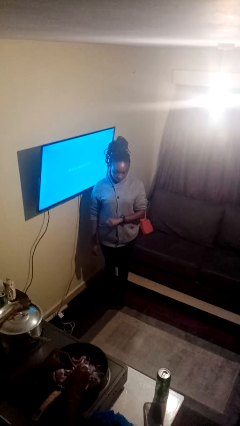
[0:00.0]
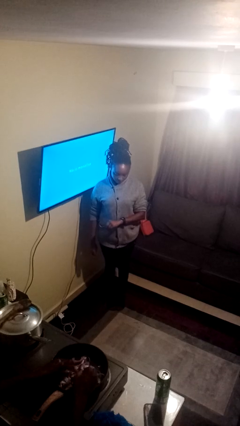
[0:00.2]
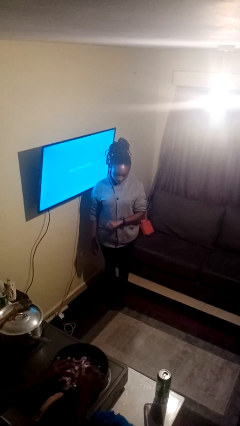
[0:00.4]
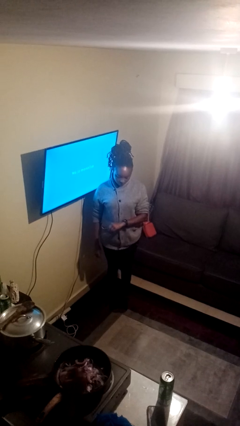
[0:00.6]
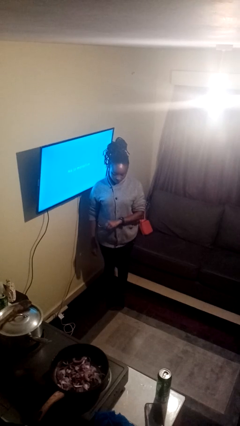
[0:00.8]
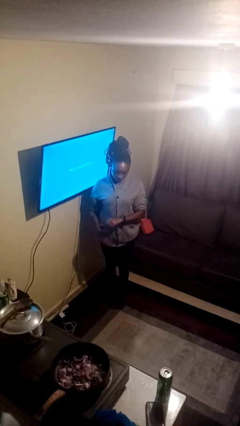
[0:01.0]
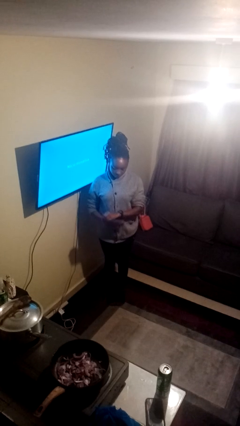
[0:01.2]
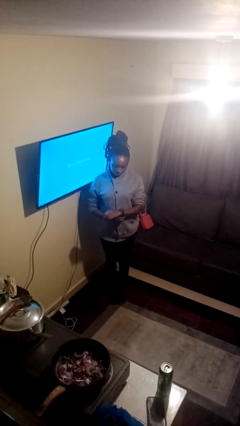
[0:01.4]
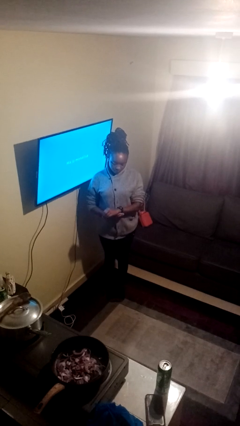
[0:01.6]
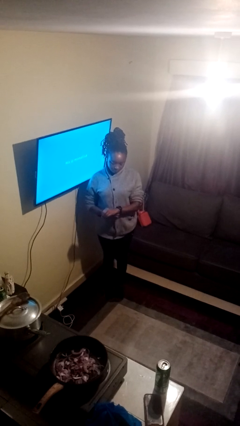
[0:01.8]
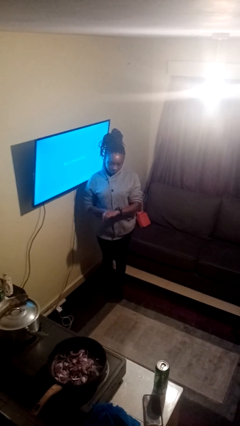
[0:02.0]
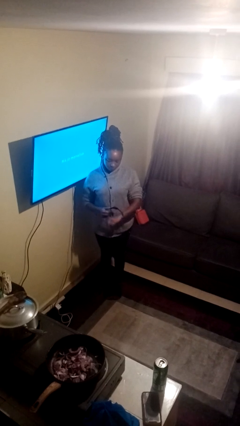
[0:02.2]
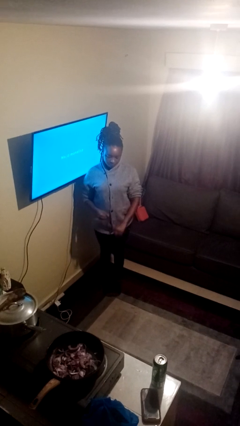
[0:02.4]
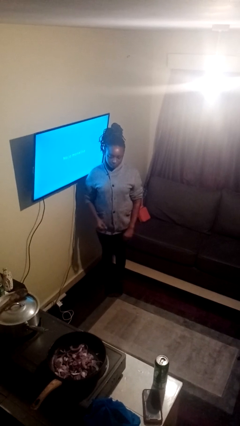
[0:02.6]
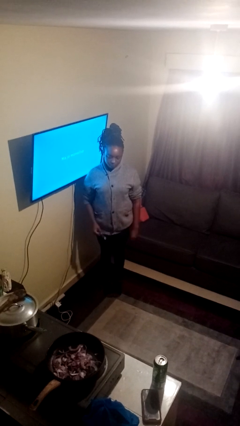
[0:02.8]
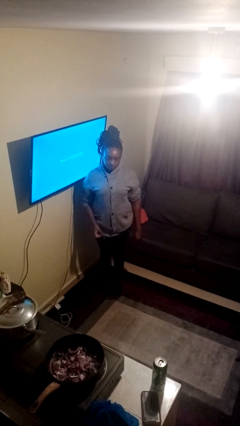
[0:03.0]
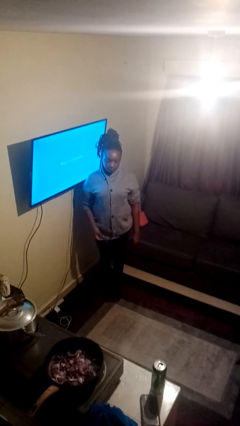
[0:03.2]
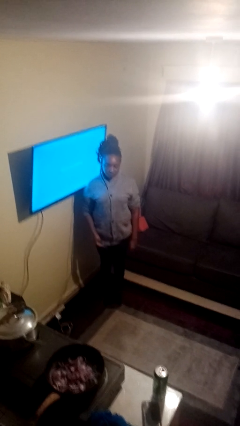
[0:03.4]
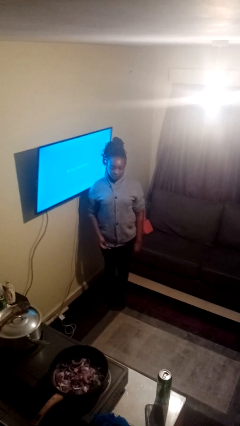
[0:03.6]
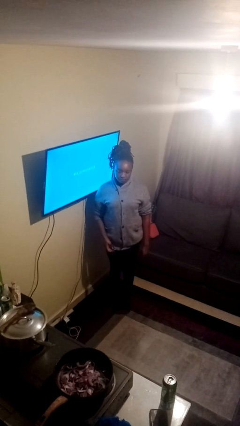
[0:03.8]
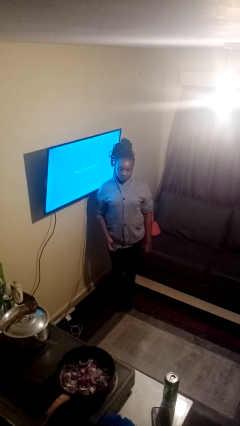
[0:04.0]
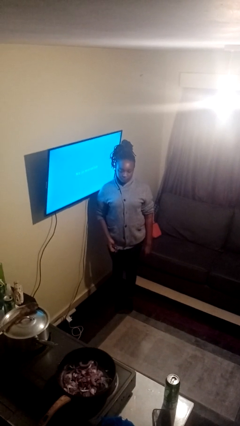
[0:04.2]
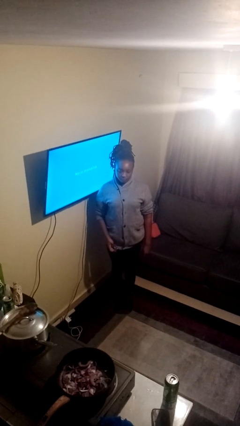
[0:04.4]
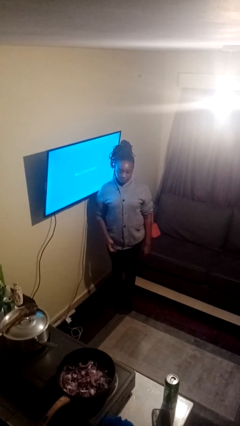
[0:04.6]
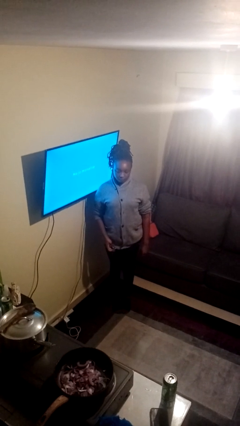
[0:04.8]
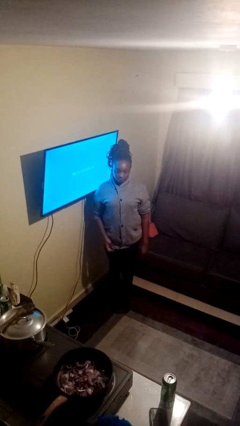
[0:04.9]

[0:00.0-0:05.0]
person takes off wristwatch

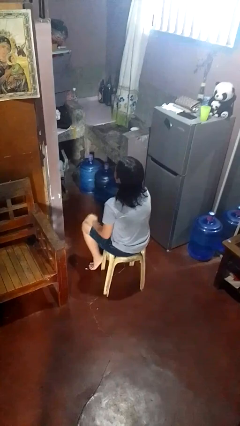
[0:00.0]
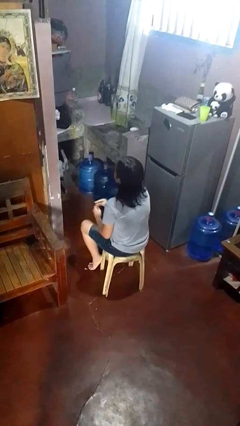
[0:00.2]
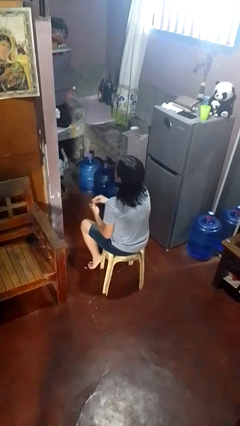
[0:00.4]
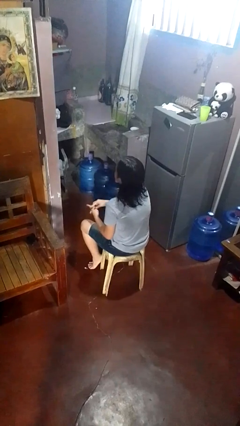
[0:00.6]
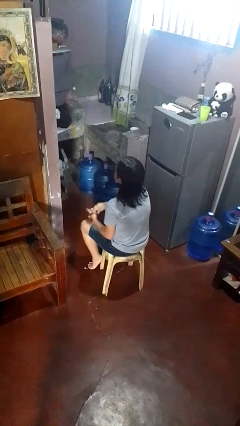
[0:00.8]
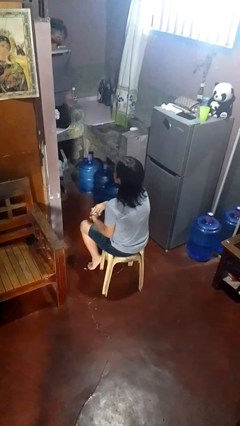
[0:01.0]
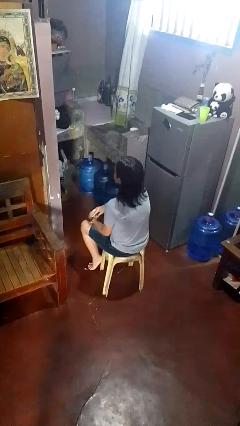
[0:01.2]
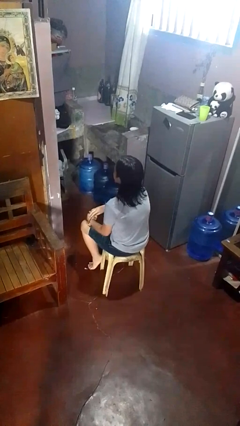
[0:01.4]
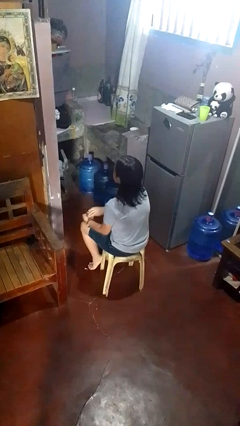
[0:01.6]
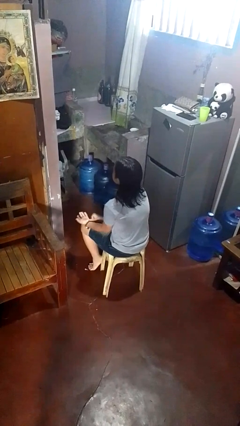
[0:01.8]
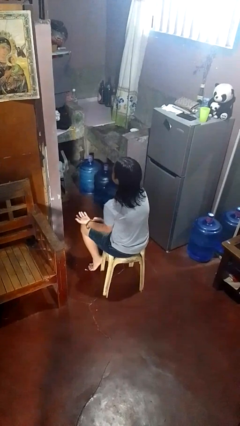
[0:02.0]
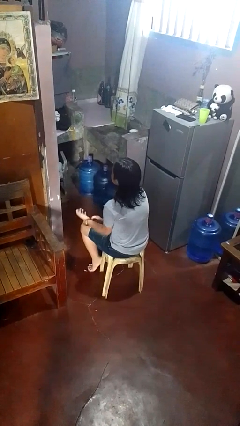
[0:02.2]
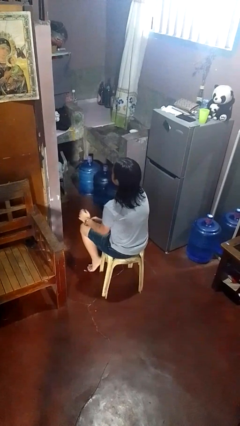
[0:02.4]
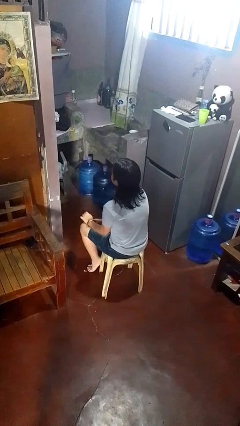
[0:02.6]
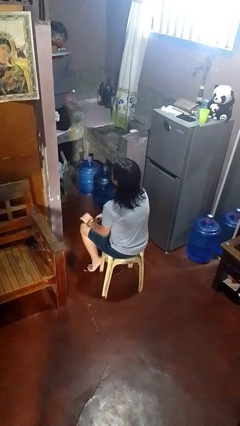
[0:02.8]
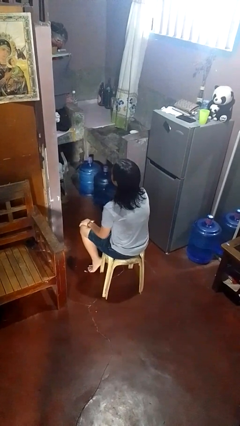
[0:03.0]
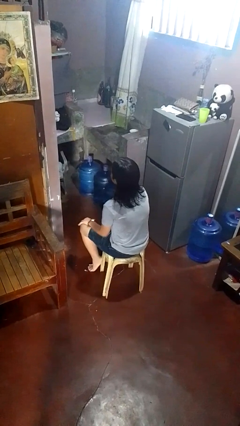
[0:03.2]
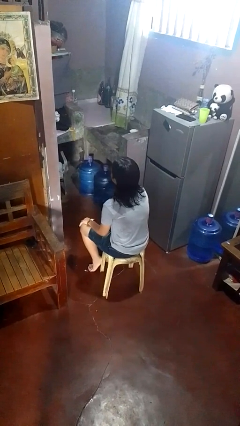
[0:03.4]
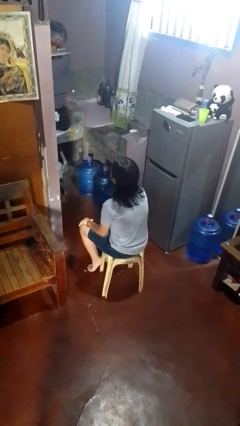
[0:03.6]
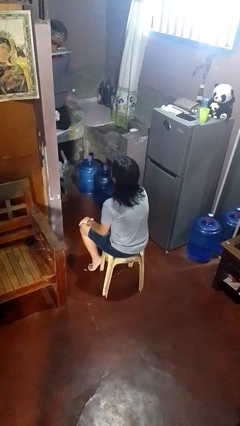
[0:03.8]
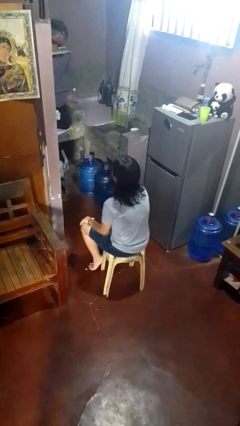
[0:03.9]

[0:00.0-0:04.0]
person puts on wristwatch

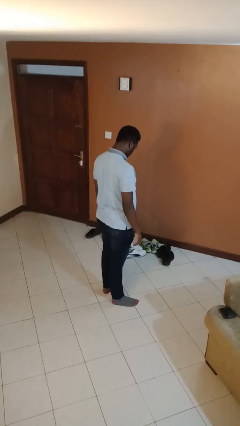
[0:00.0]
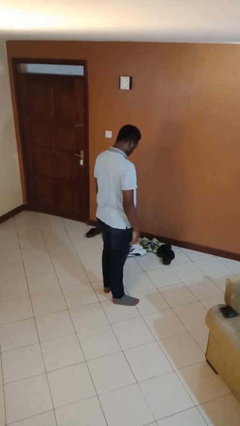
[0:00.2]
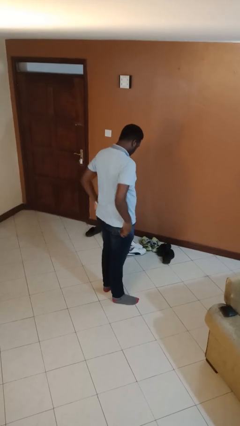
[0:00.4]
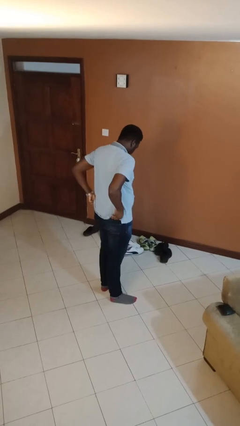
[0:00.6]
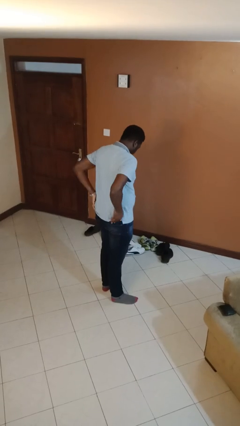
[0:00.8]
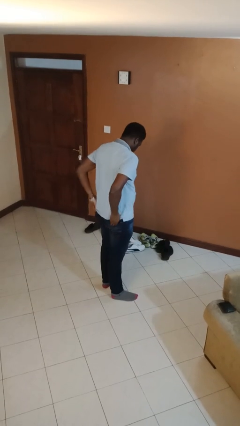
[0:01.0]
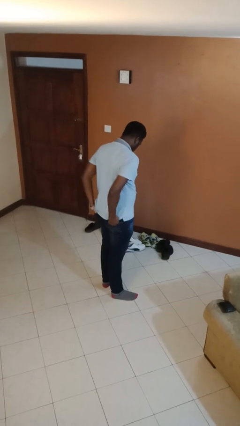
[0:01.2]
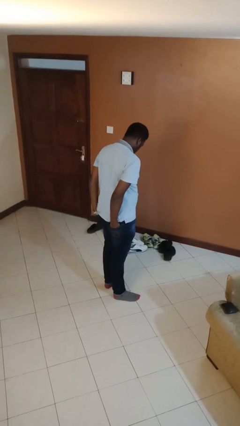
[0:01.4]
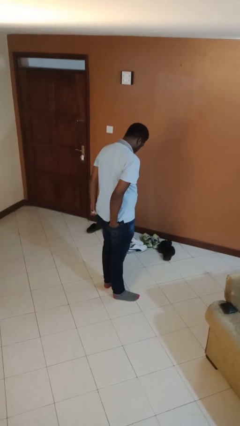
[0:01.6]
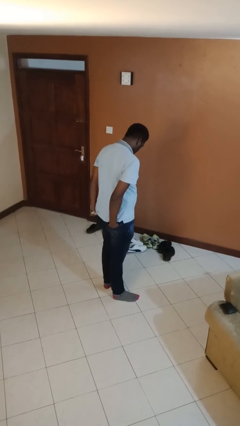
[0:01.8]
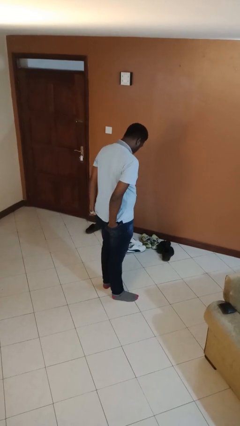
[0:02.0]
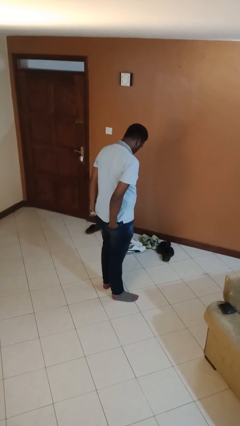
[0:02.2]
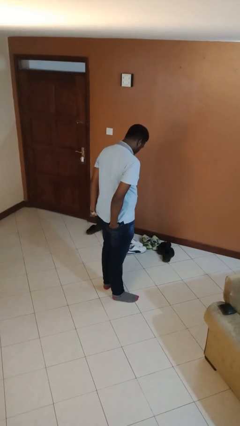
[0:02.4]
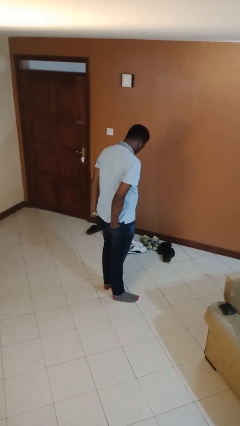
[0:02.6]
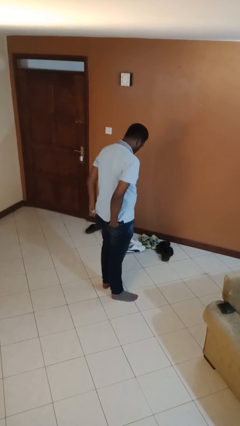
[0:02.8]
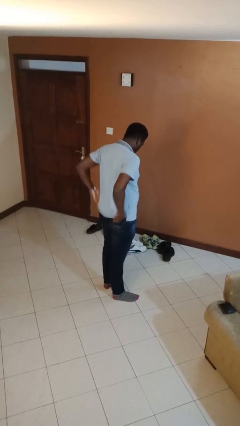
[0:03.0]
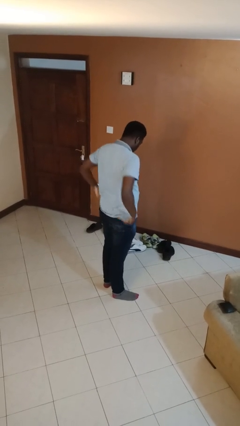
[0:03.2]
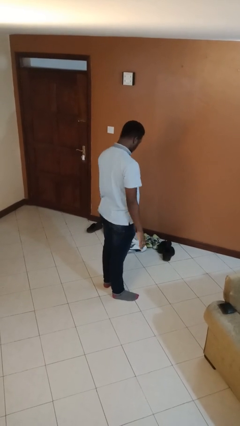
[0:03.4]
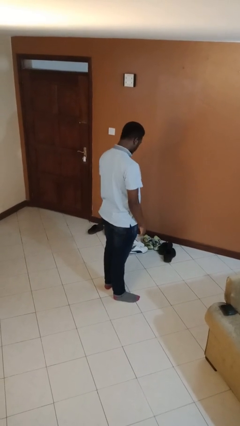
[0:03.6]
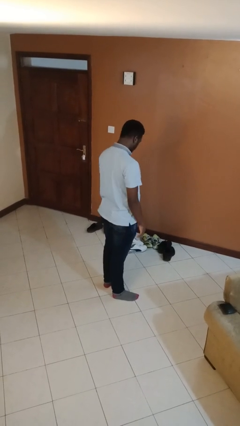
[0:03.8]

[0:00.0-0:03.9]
person puts hands in back pockets

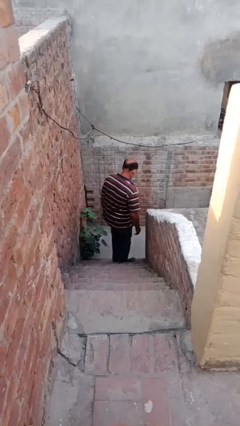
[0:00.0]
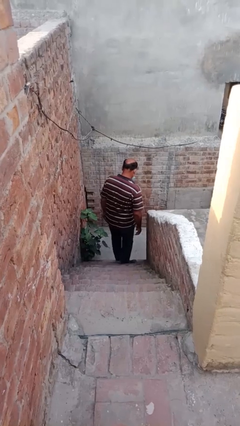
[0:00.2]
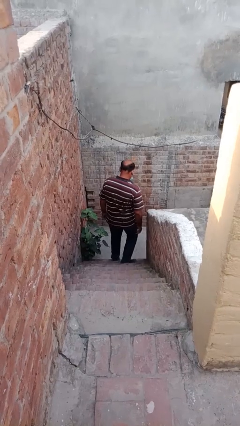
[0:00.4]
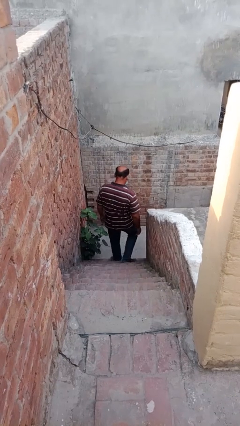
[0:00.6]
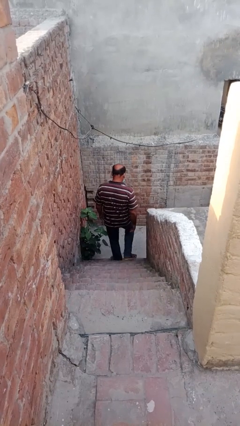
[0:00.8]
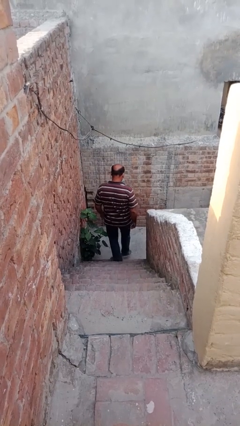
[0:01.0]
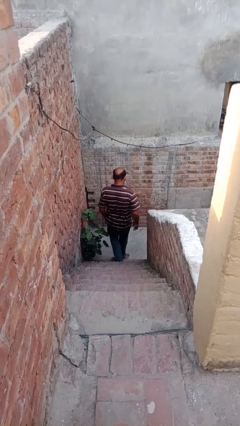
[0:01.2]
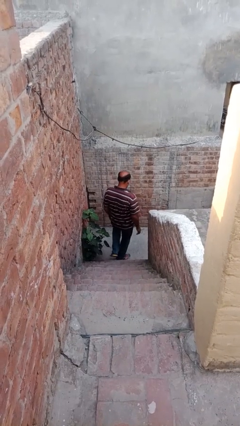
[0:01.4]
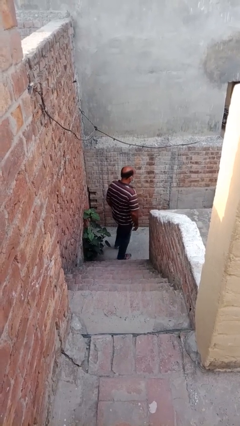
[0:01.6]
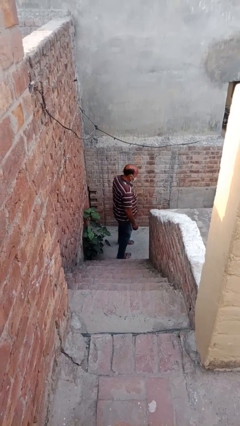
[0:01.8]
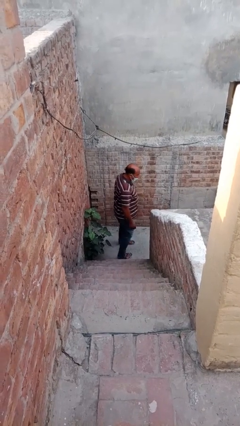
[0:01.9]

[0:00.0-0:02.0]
person climbs down stairs

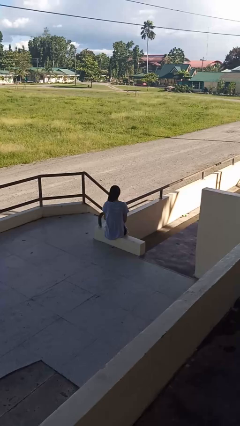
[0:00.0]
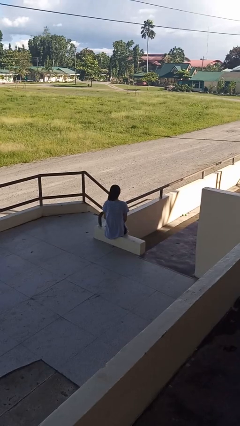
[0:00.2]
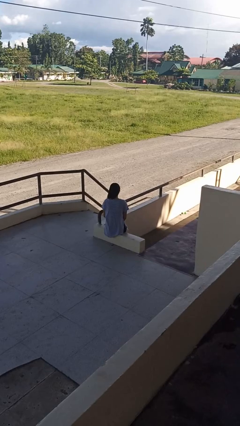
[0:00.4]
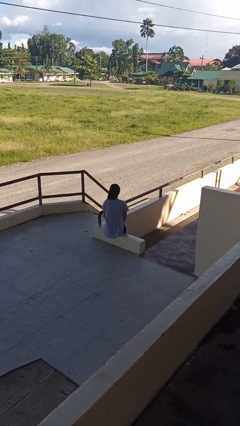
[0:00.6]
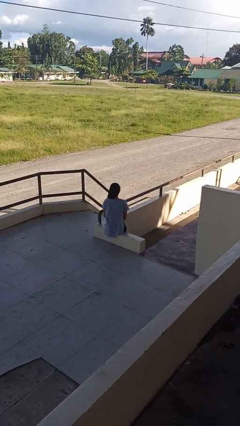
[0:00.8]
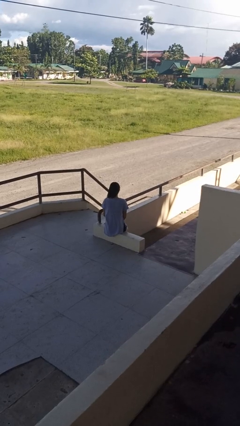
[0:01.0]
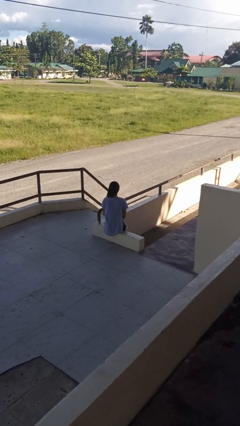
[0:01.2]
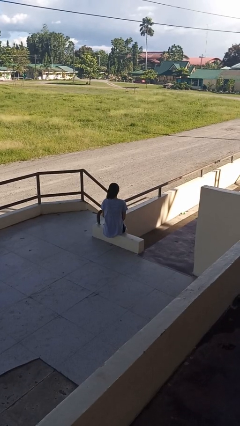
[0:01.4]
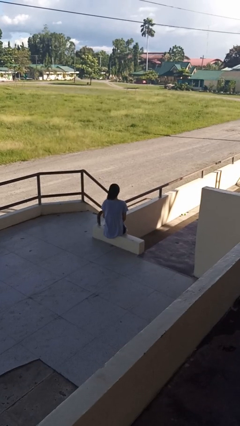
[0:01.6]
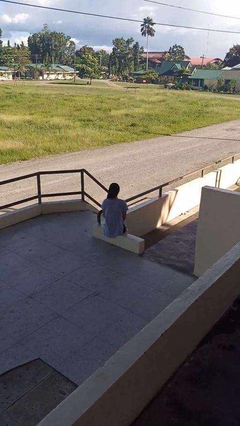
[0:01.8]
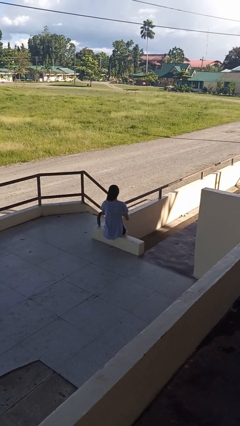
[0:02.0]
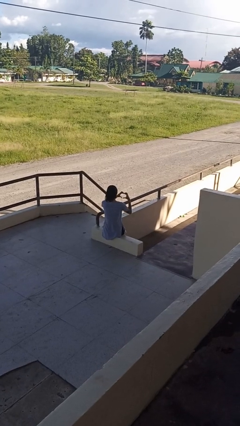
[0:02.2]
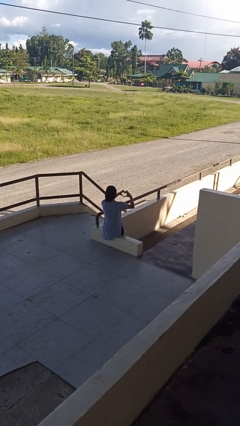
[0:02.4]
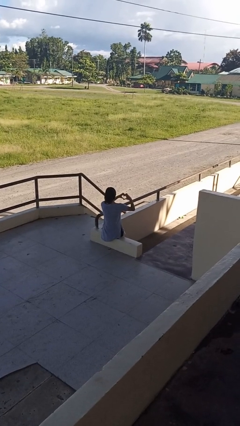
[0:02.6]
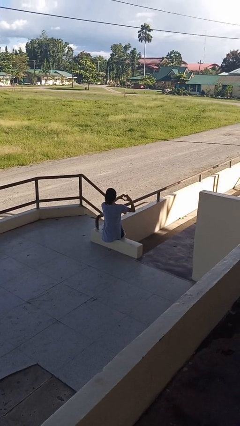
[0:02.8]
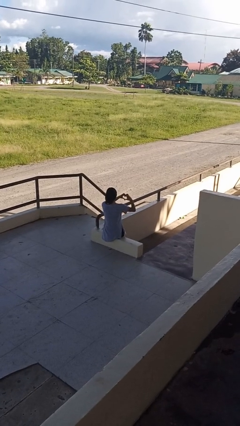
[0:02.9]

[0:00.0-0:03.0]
person gestures heart
